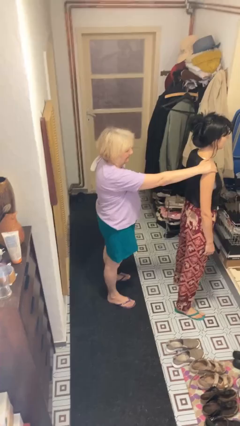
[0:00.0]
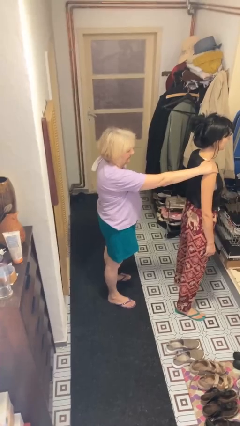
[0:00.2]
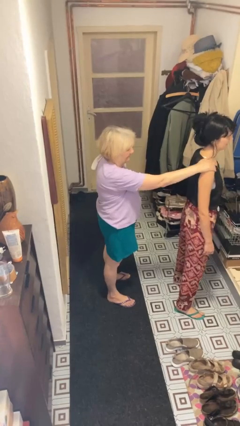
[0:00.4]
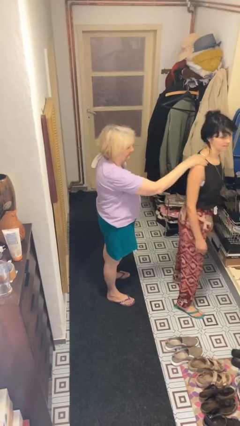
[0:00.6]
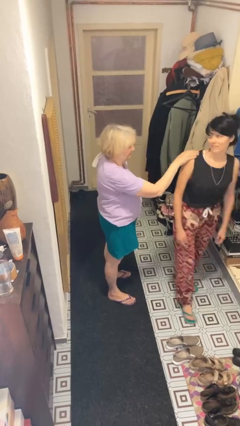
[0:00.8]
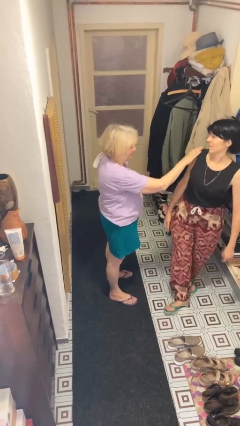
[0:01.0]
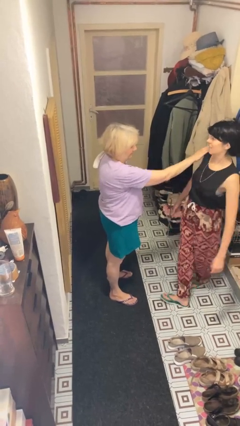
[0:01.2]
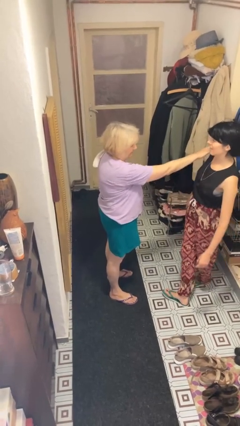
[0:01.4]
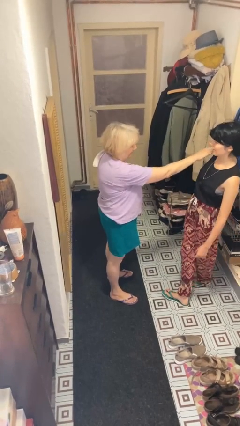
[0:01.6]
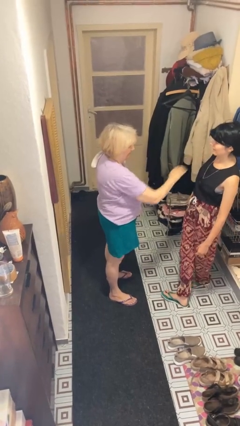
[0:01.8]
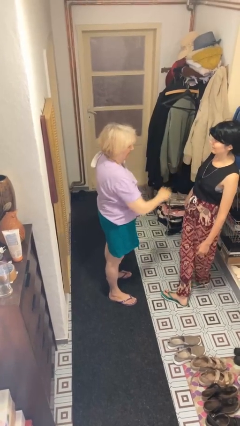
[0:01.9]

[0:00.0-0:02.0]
person spins person around

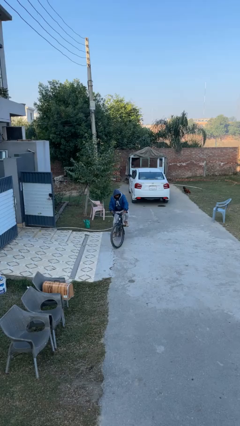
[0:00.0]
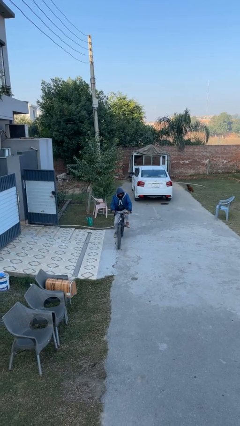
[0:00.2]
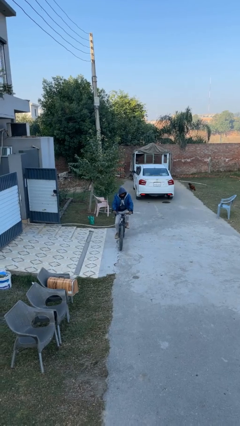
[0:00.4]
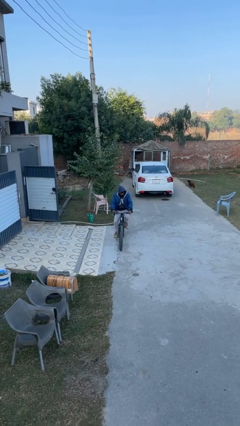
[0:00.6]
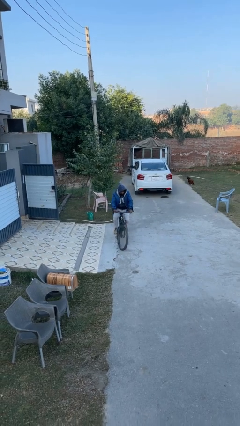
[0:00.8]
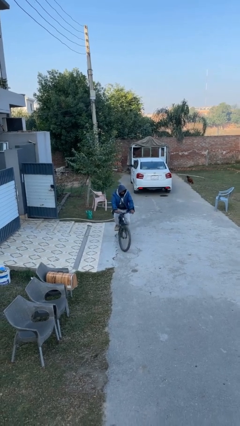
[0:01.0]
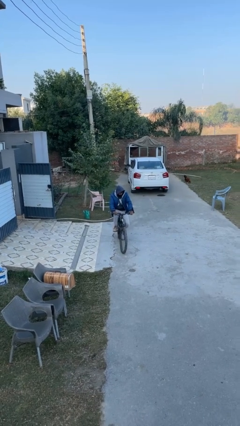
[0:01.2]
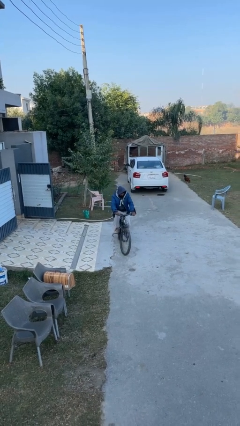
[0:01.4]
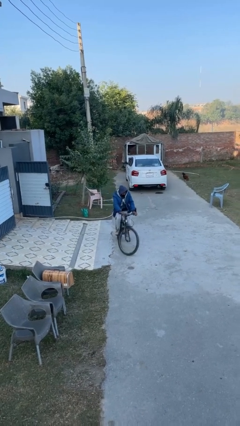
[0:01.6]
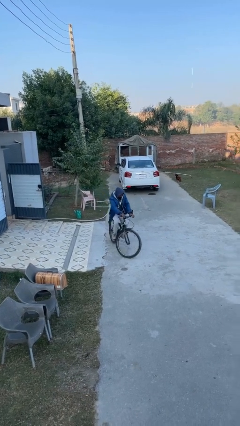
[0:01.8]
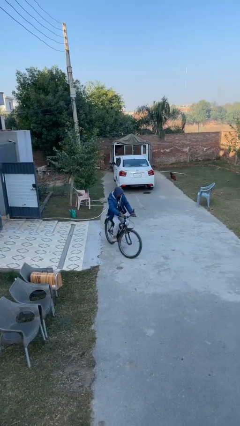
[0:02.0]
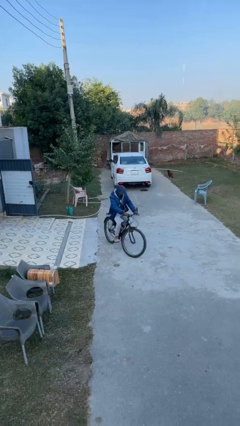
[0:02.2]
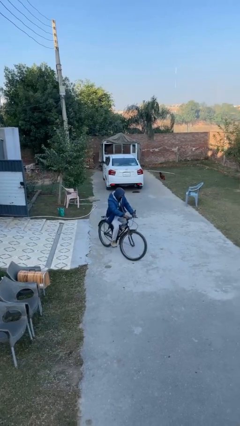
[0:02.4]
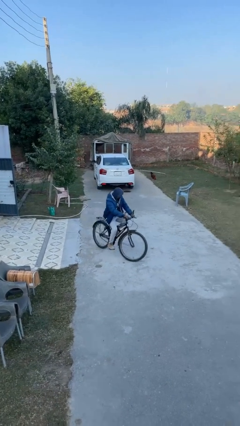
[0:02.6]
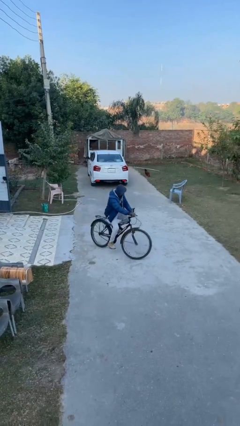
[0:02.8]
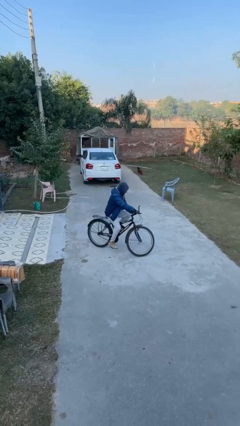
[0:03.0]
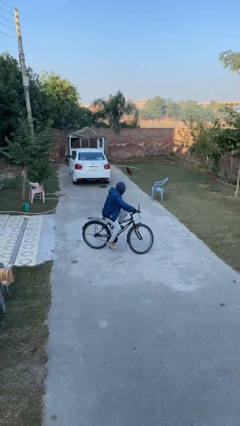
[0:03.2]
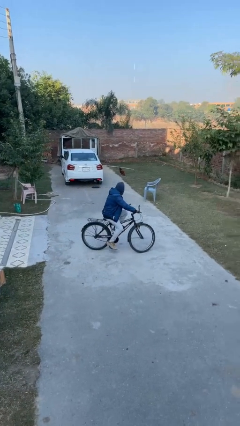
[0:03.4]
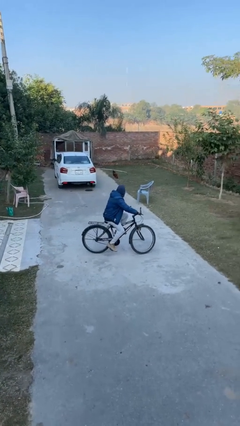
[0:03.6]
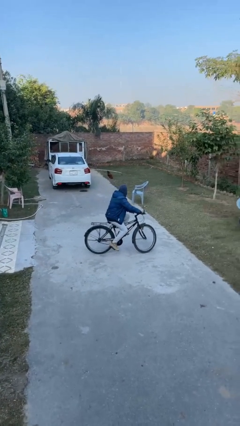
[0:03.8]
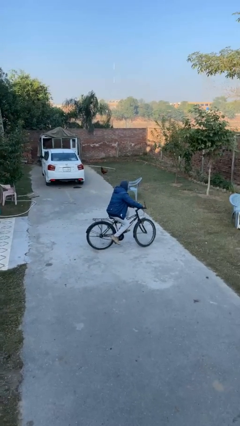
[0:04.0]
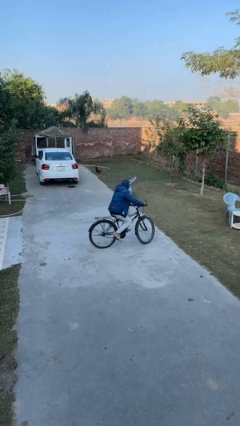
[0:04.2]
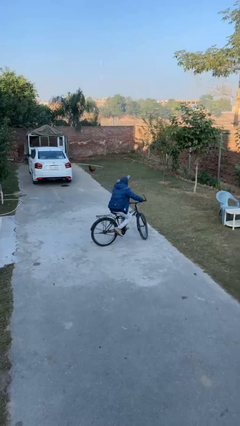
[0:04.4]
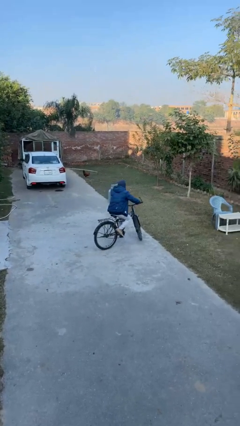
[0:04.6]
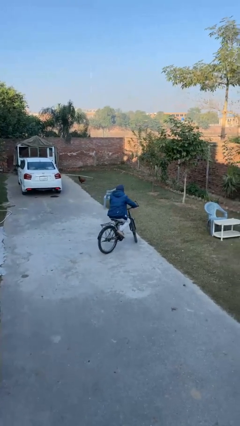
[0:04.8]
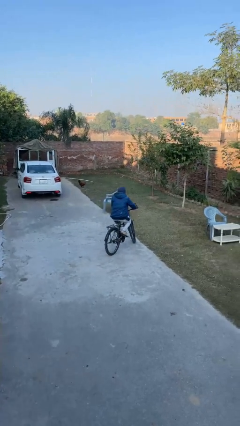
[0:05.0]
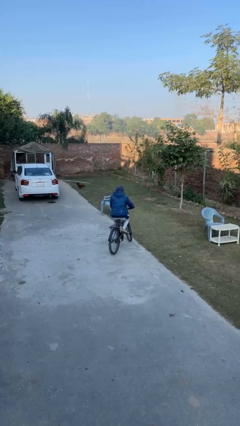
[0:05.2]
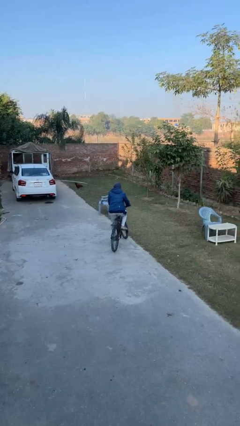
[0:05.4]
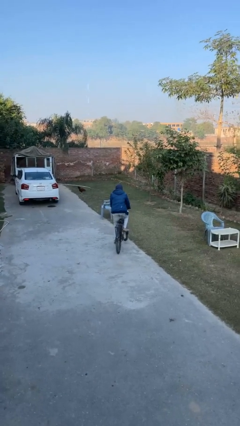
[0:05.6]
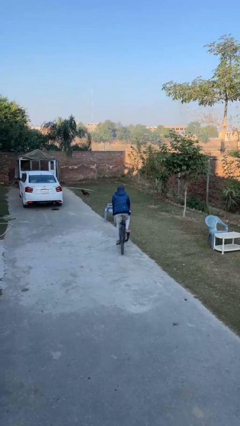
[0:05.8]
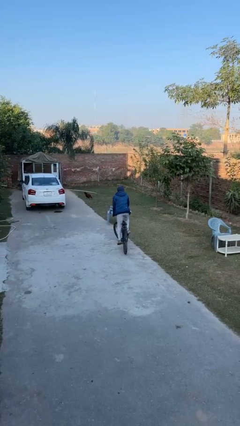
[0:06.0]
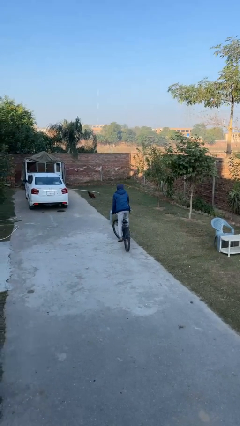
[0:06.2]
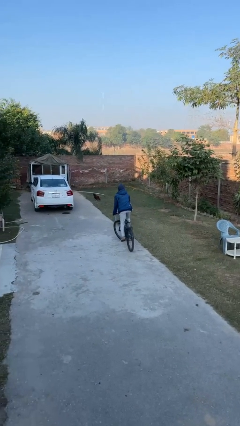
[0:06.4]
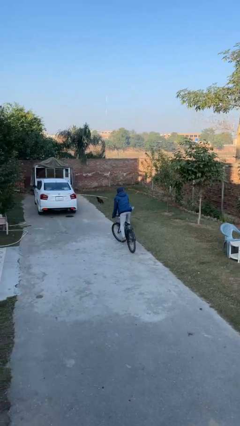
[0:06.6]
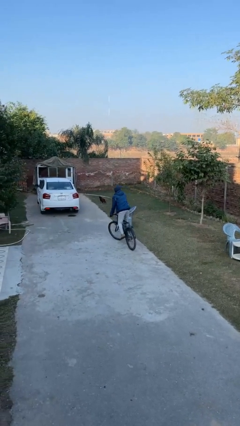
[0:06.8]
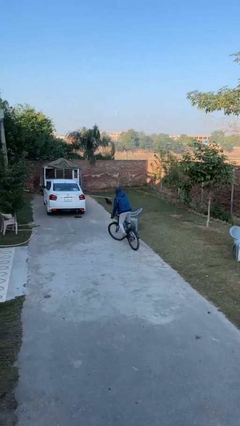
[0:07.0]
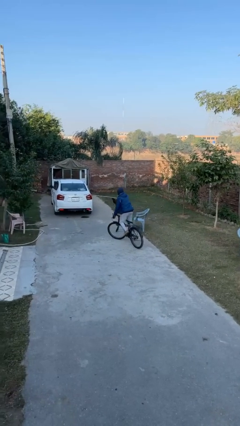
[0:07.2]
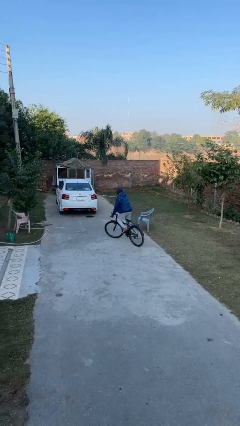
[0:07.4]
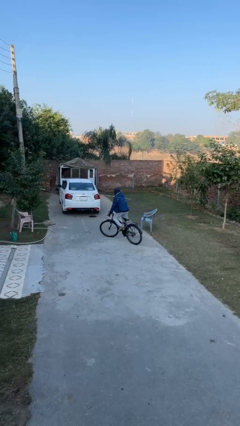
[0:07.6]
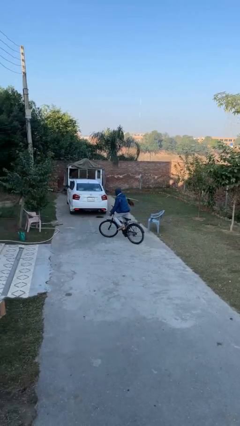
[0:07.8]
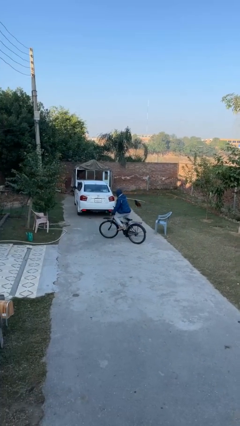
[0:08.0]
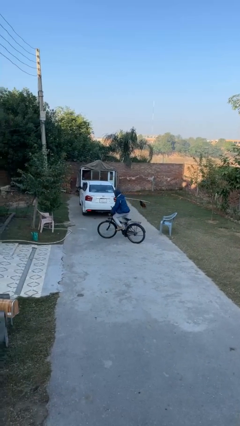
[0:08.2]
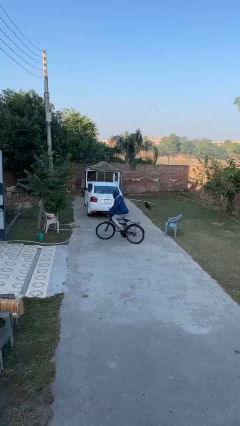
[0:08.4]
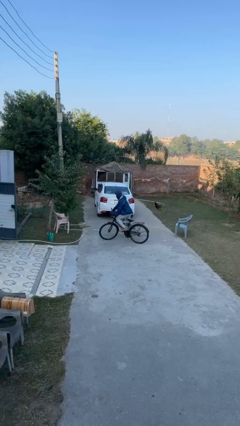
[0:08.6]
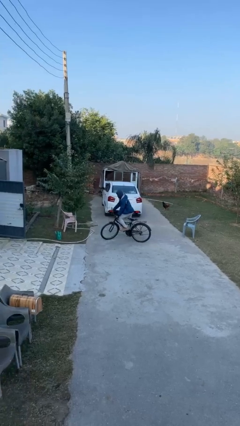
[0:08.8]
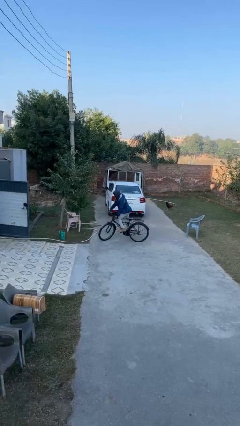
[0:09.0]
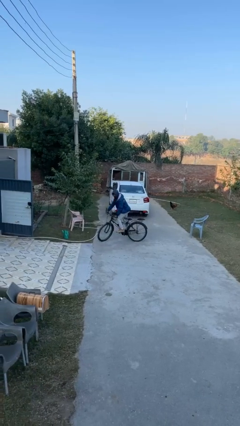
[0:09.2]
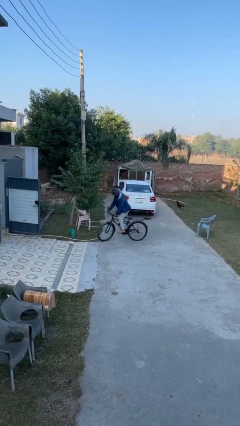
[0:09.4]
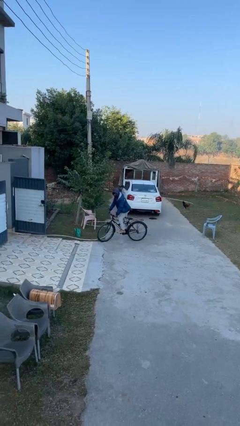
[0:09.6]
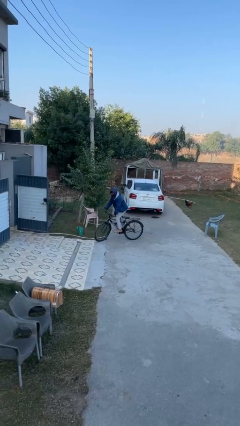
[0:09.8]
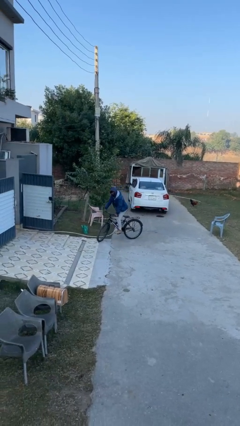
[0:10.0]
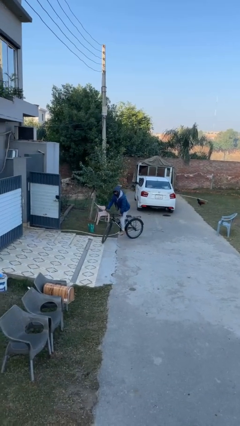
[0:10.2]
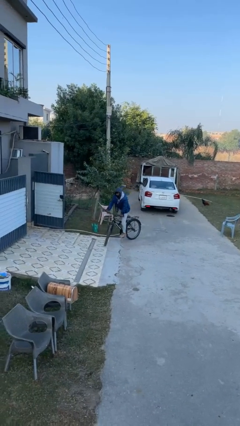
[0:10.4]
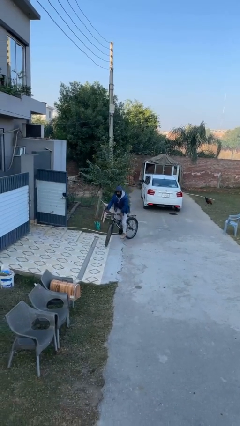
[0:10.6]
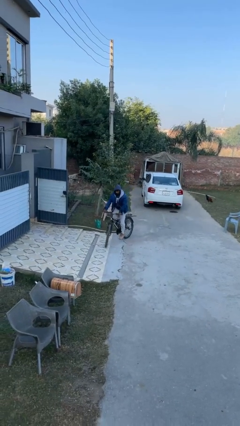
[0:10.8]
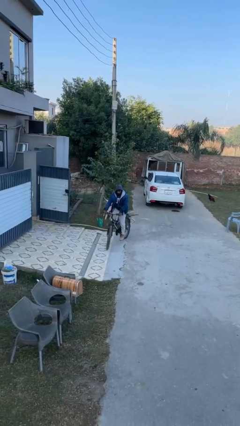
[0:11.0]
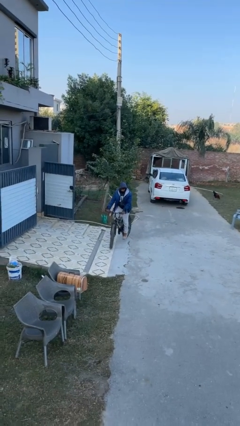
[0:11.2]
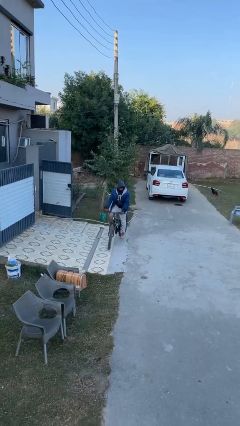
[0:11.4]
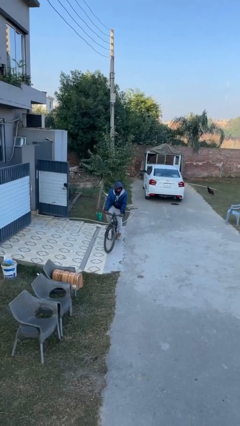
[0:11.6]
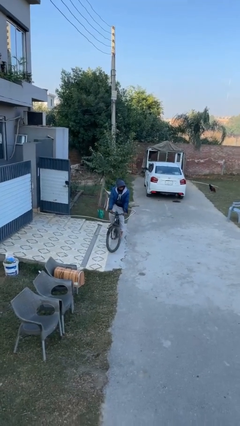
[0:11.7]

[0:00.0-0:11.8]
person rides bicycle

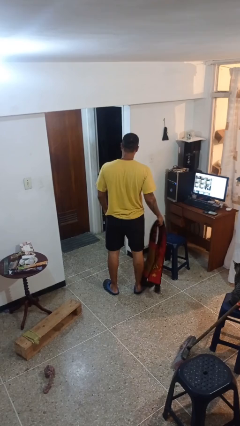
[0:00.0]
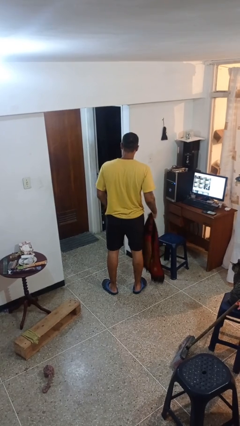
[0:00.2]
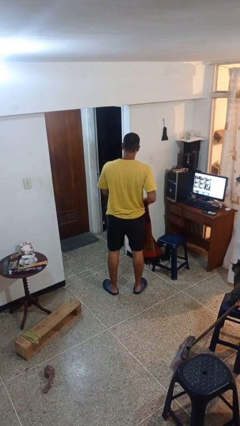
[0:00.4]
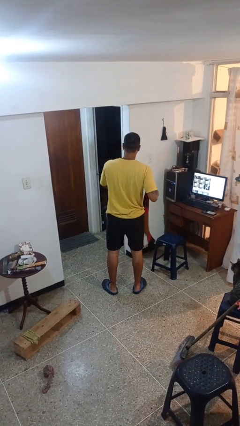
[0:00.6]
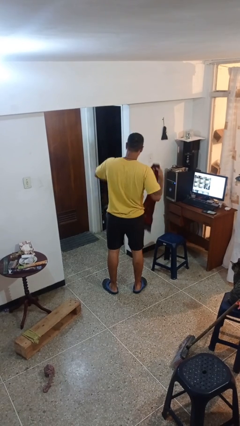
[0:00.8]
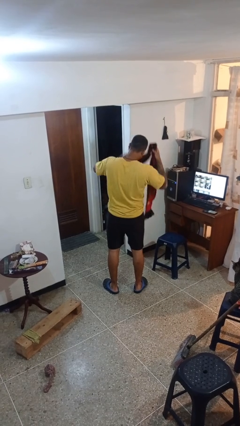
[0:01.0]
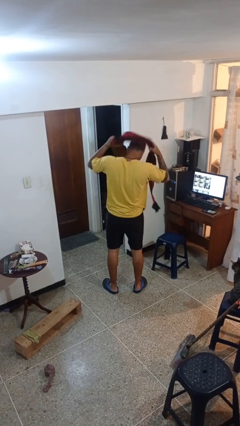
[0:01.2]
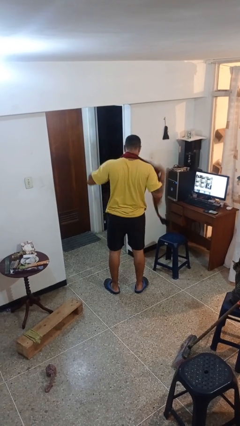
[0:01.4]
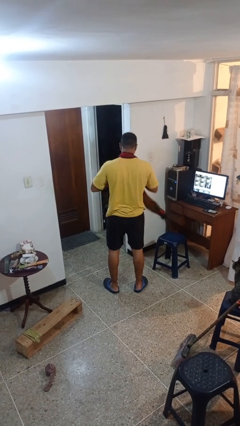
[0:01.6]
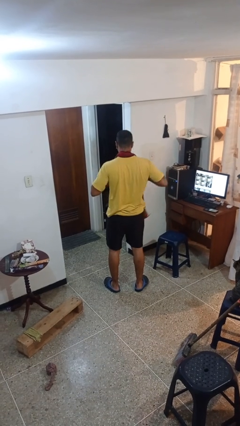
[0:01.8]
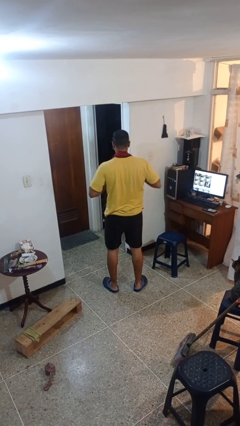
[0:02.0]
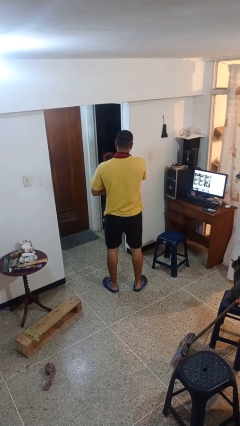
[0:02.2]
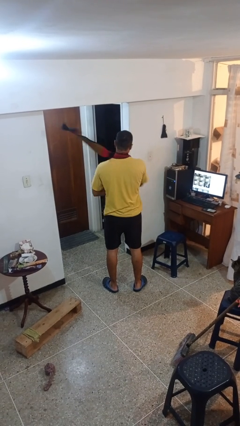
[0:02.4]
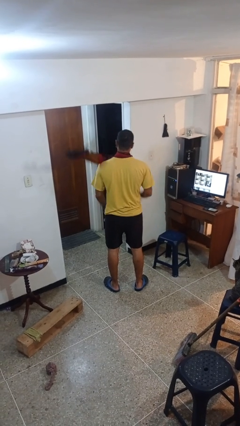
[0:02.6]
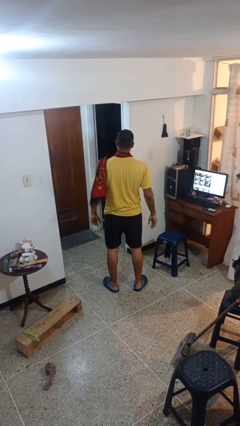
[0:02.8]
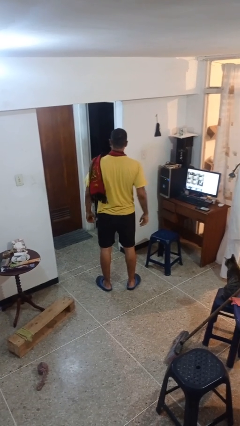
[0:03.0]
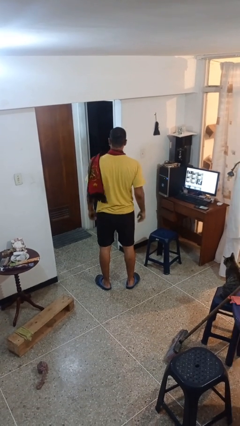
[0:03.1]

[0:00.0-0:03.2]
person puts on scarf

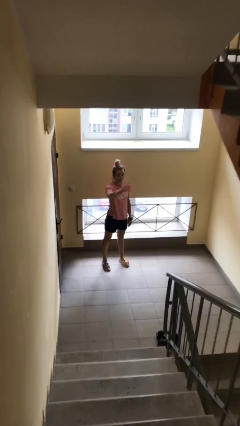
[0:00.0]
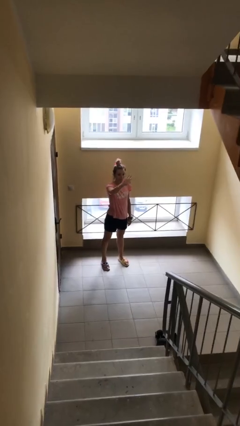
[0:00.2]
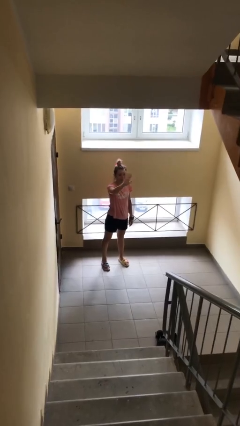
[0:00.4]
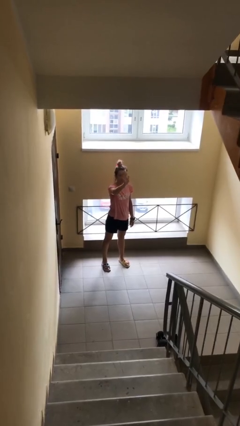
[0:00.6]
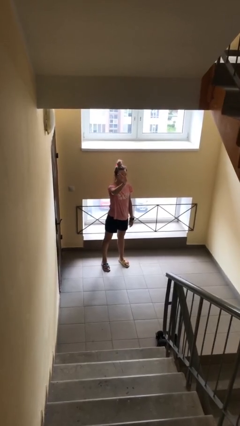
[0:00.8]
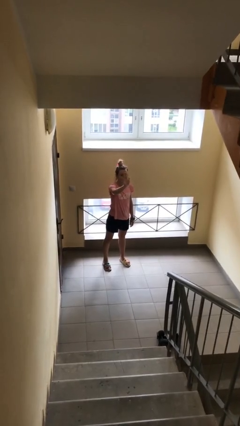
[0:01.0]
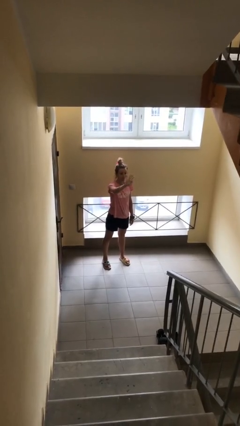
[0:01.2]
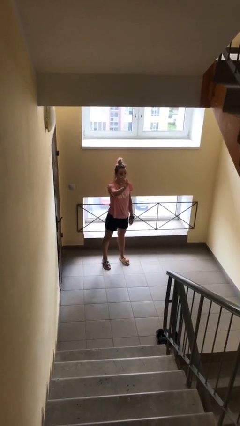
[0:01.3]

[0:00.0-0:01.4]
person waves at person
